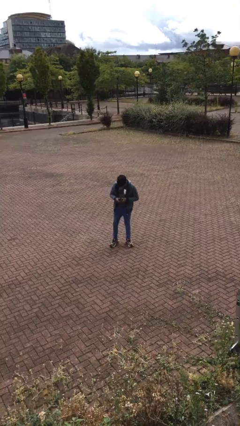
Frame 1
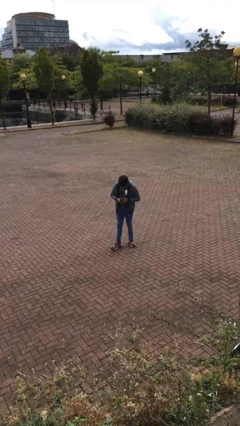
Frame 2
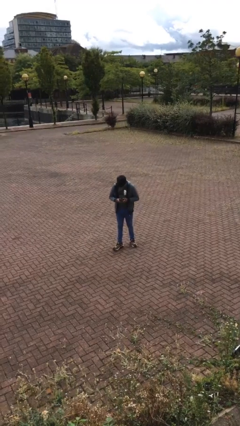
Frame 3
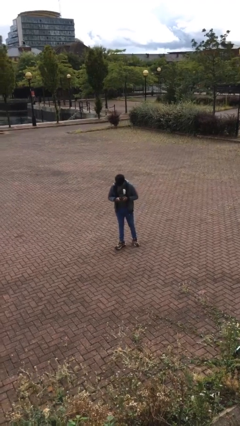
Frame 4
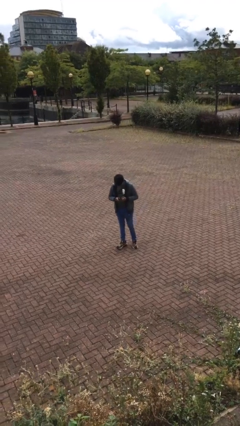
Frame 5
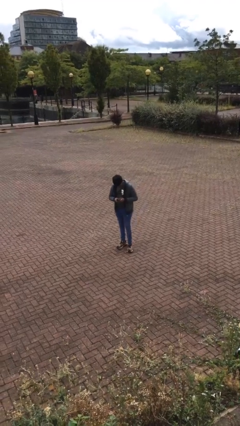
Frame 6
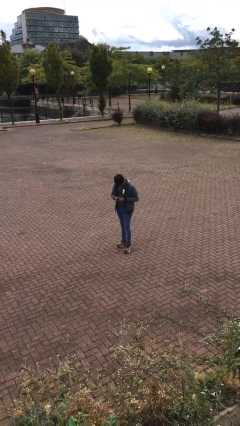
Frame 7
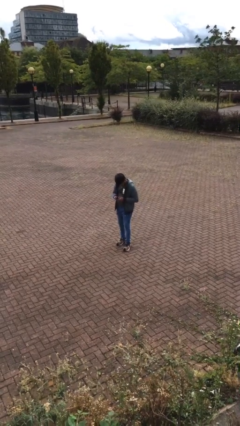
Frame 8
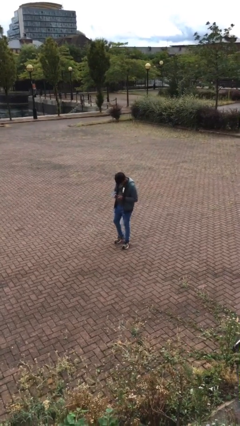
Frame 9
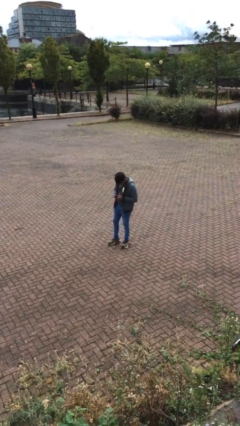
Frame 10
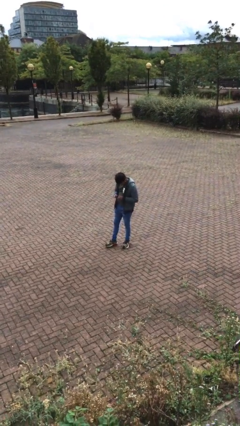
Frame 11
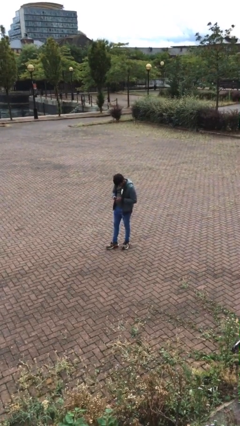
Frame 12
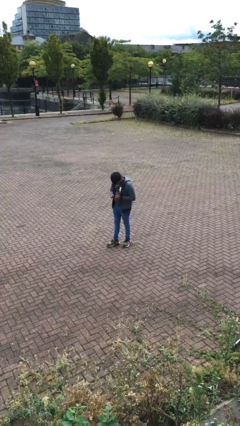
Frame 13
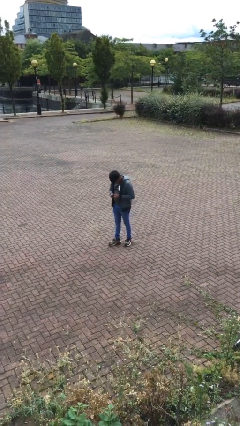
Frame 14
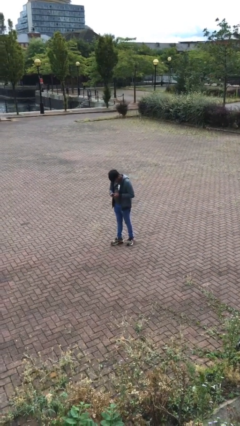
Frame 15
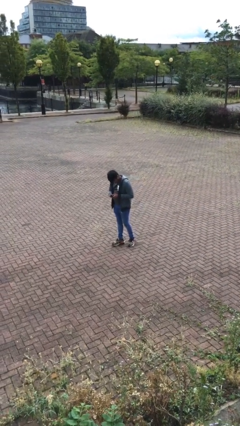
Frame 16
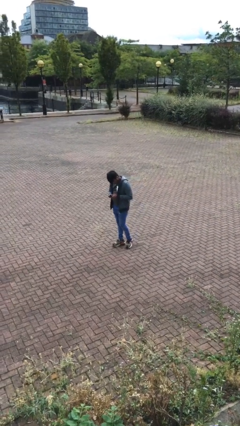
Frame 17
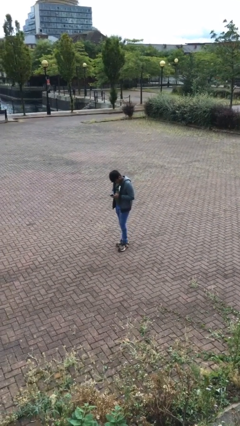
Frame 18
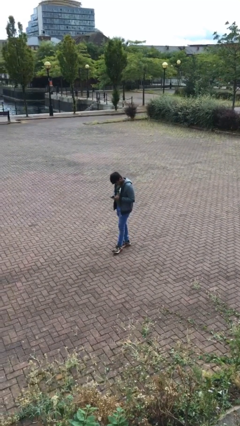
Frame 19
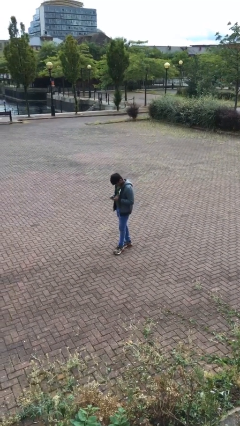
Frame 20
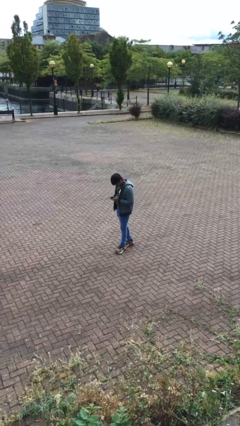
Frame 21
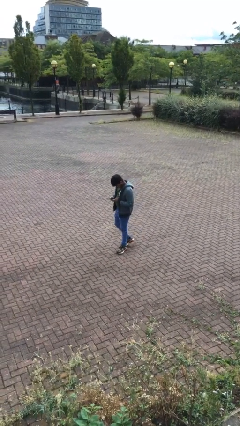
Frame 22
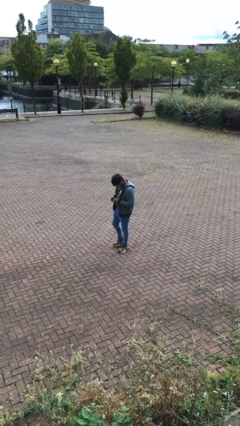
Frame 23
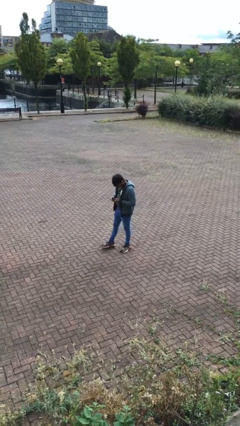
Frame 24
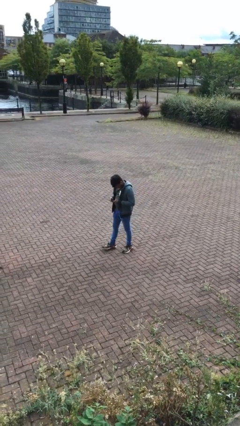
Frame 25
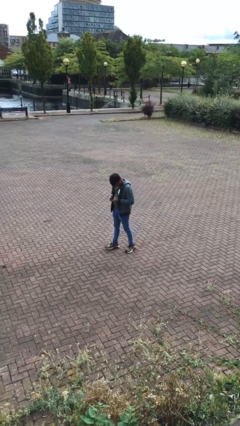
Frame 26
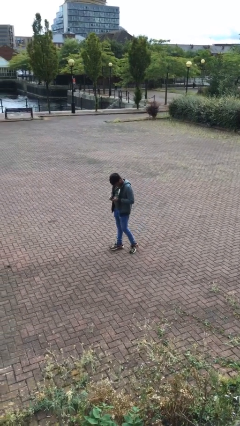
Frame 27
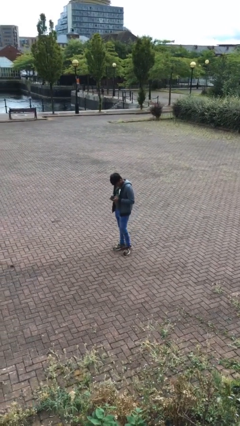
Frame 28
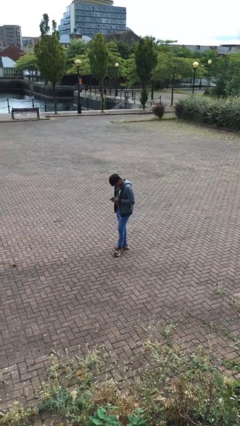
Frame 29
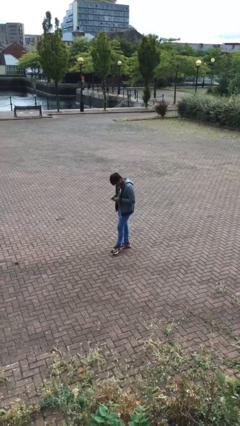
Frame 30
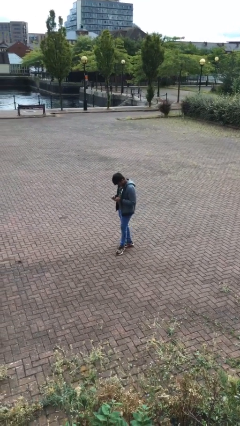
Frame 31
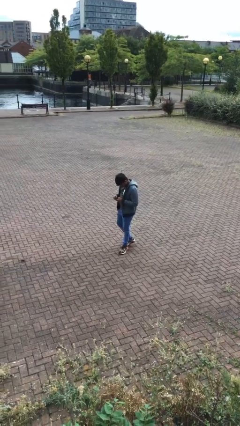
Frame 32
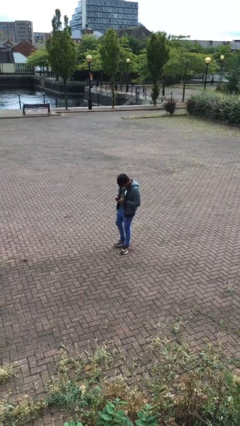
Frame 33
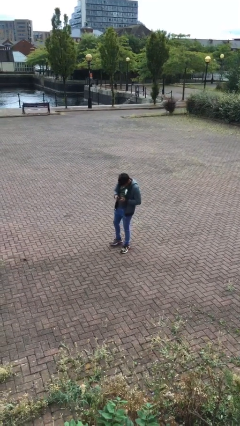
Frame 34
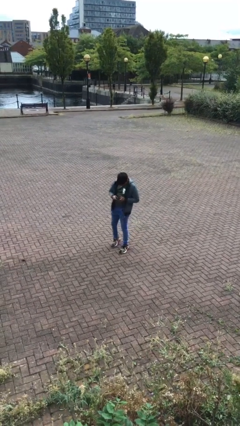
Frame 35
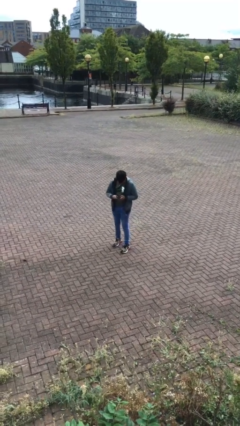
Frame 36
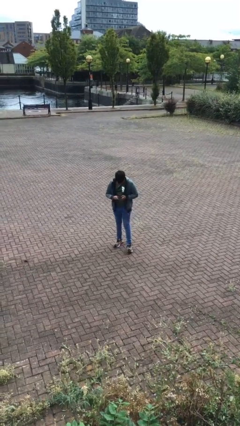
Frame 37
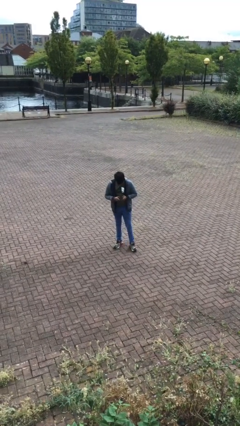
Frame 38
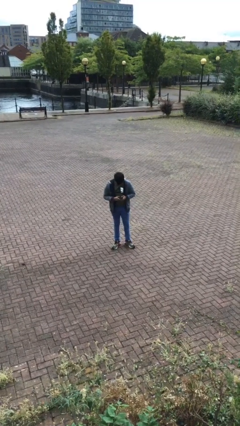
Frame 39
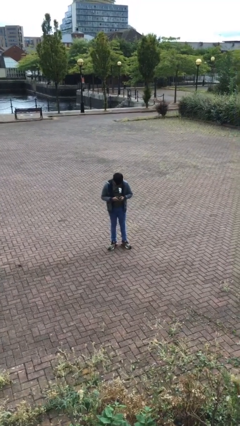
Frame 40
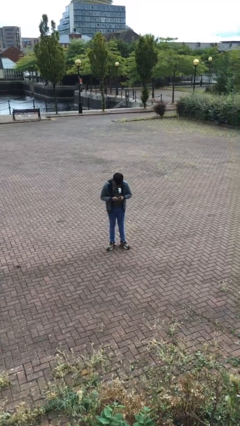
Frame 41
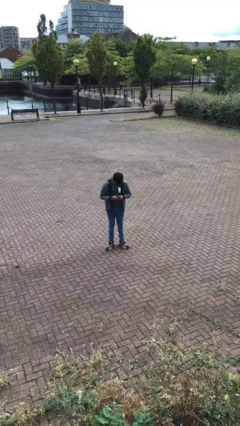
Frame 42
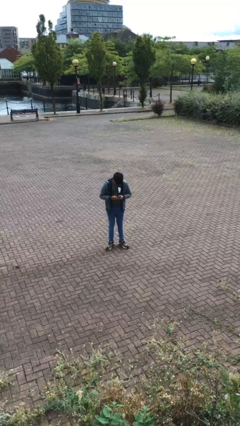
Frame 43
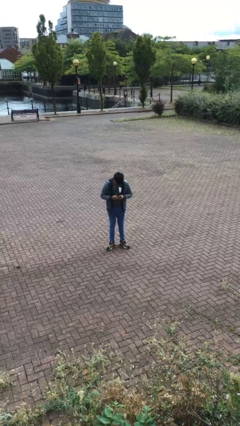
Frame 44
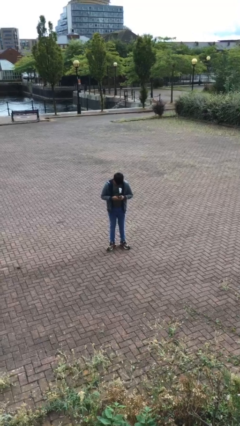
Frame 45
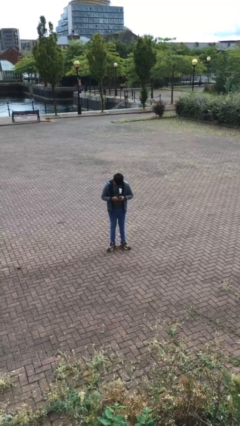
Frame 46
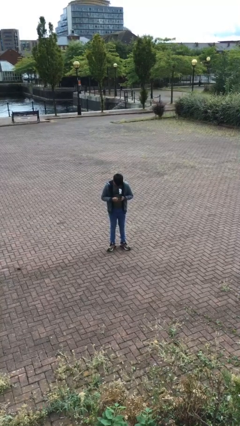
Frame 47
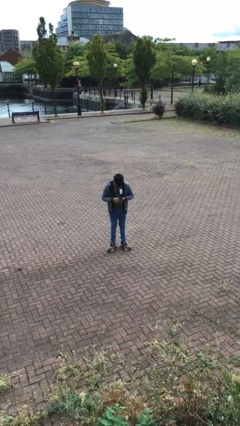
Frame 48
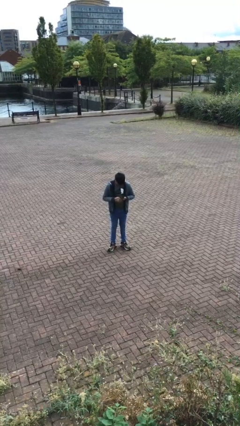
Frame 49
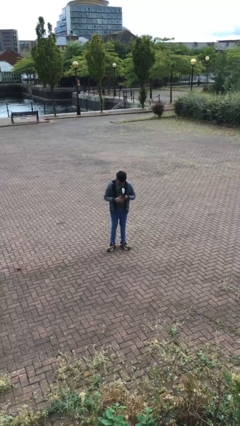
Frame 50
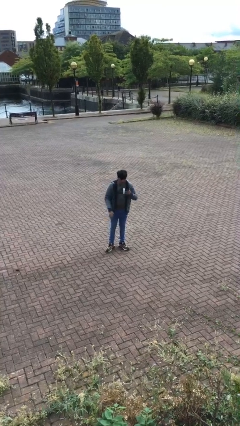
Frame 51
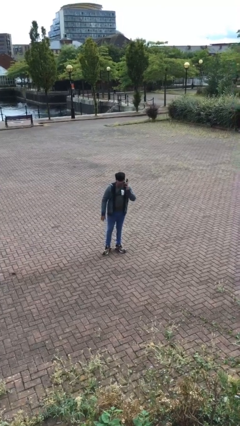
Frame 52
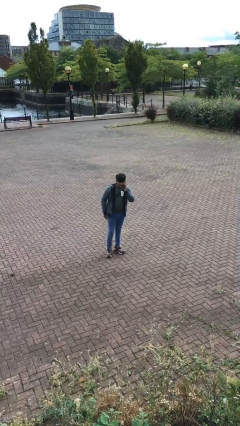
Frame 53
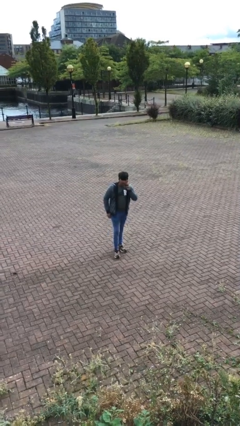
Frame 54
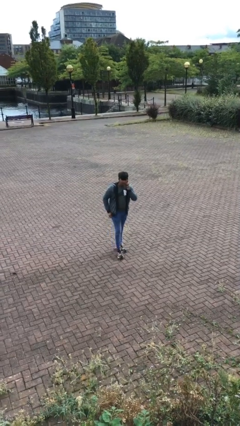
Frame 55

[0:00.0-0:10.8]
person texts on phone

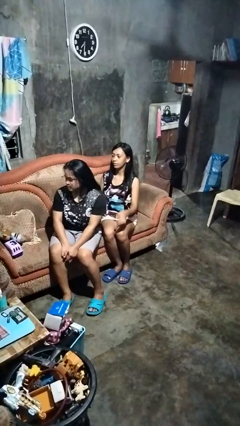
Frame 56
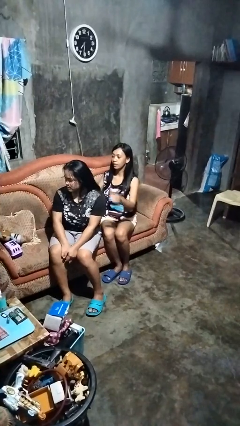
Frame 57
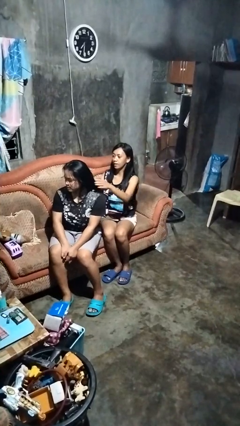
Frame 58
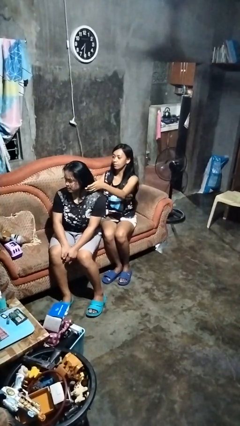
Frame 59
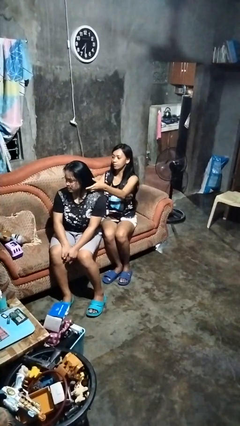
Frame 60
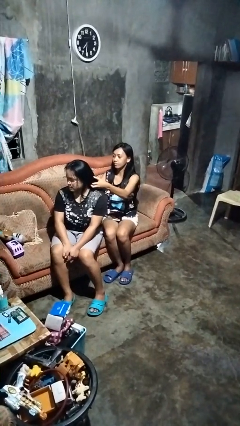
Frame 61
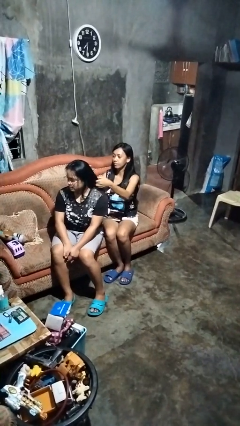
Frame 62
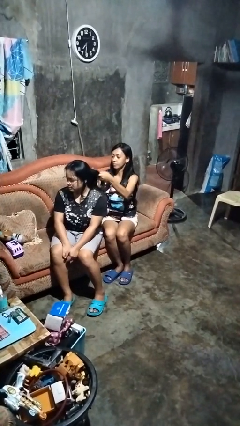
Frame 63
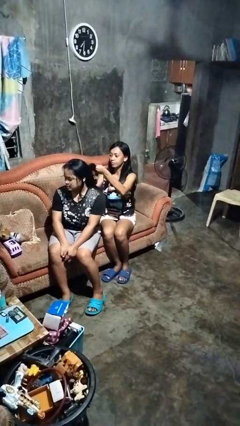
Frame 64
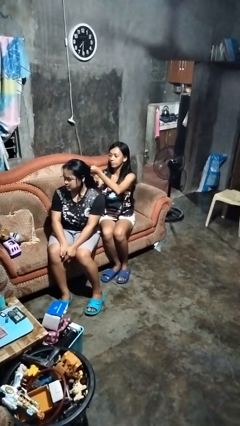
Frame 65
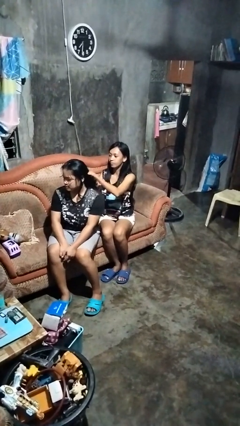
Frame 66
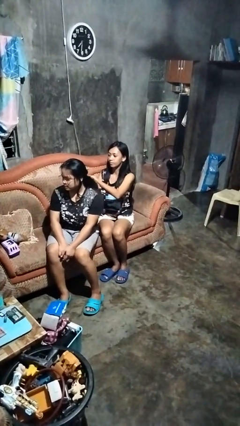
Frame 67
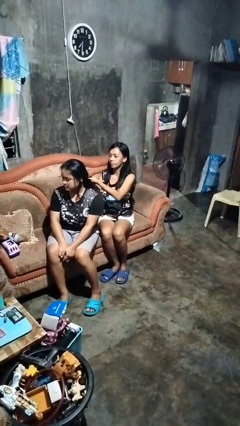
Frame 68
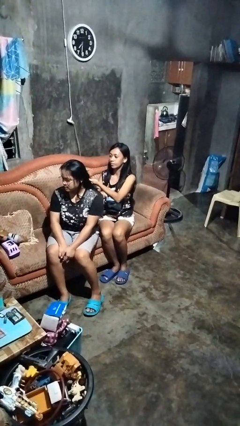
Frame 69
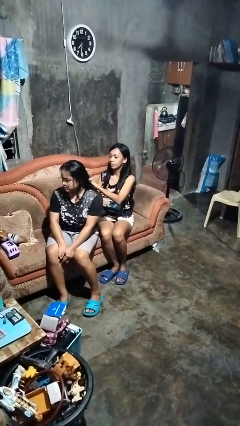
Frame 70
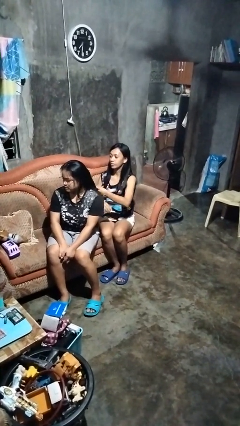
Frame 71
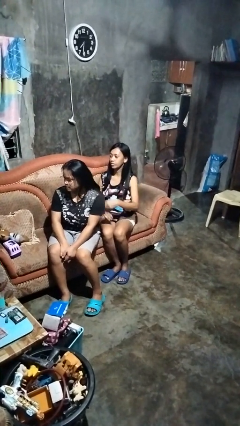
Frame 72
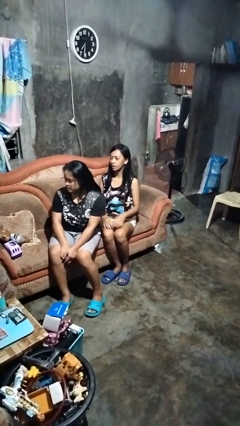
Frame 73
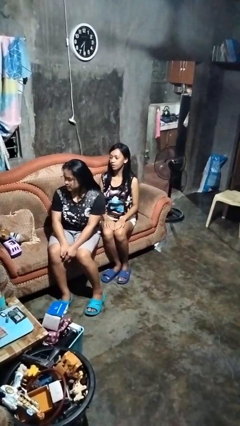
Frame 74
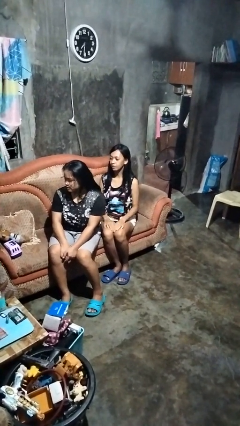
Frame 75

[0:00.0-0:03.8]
person braids hair of person

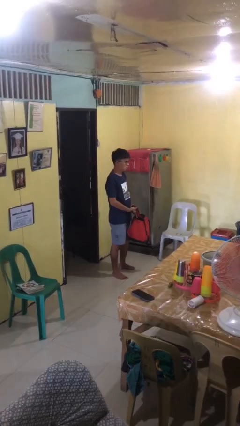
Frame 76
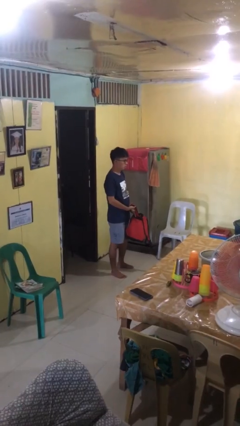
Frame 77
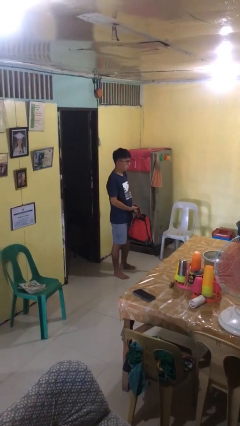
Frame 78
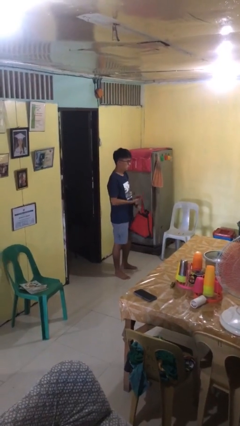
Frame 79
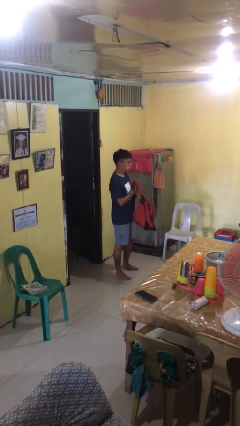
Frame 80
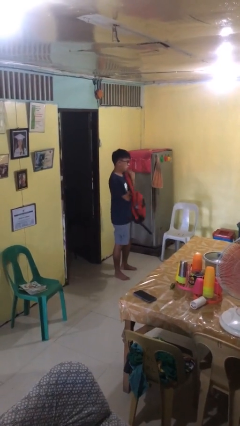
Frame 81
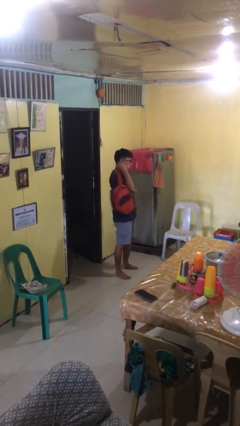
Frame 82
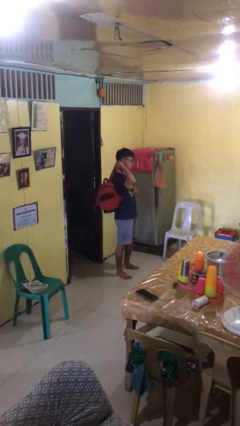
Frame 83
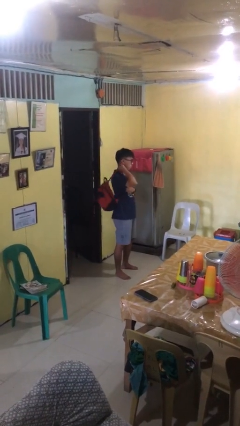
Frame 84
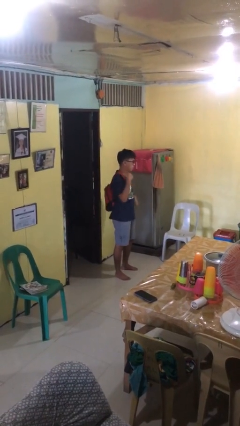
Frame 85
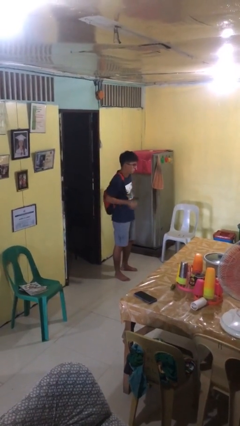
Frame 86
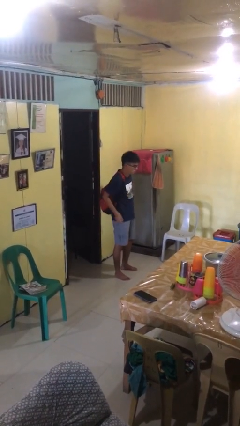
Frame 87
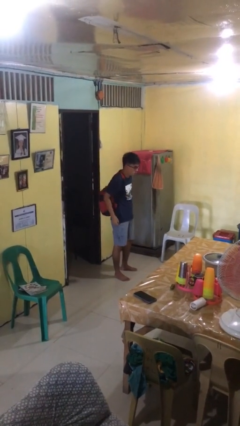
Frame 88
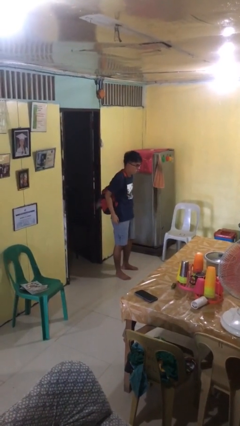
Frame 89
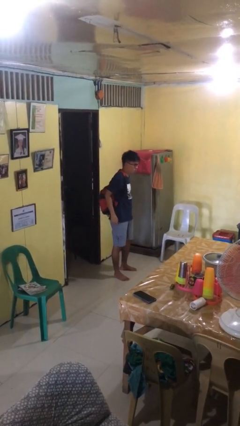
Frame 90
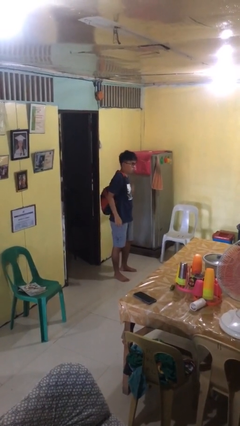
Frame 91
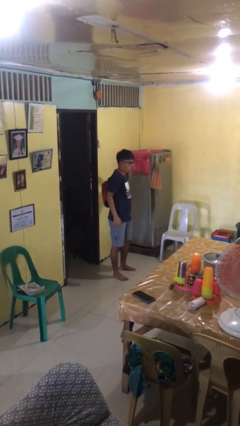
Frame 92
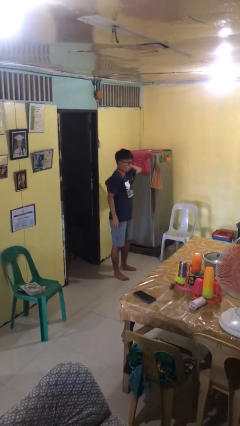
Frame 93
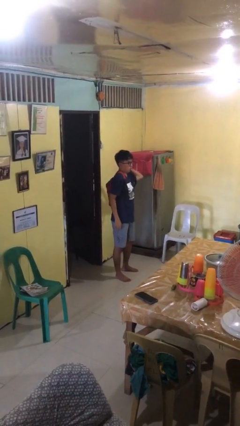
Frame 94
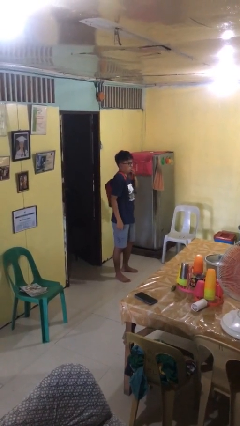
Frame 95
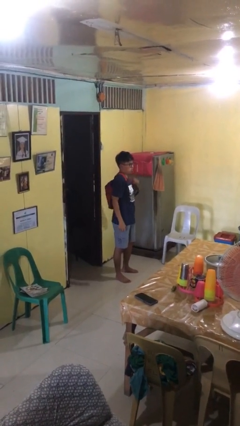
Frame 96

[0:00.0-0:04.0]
person puts on backpack
